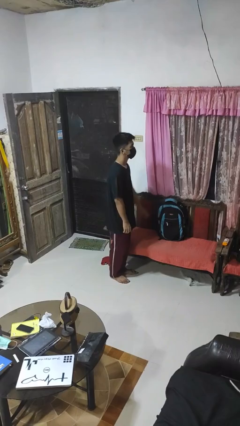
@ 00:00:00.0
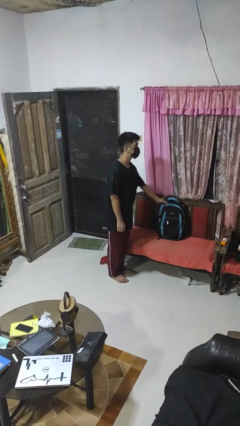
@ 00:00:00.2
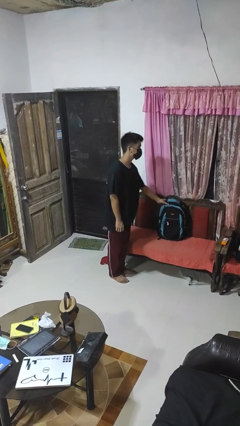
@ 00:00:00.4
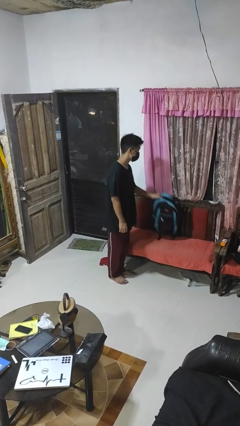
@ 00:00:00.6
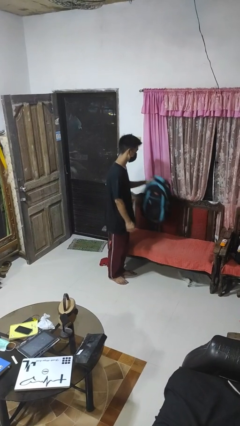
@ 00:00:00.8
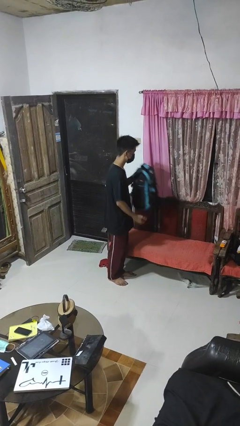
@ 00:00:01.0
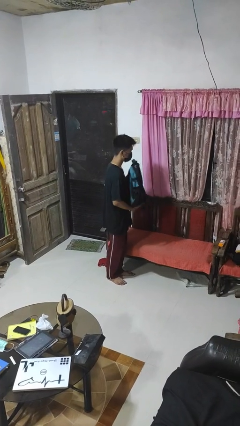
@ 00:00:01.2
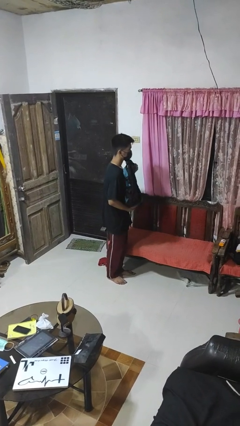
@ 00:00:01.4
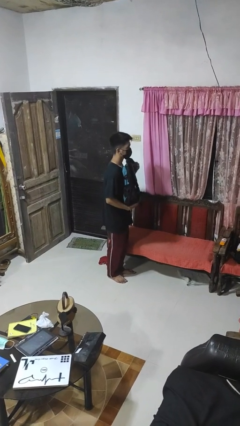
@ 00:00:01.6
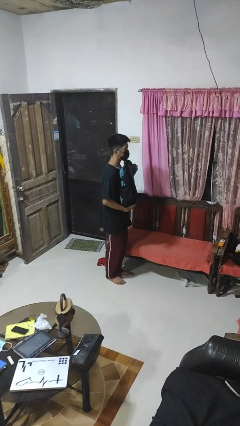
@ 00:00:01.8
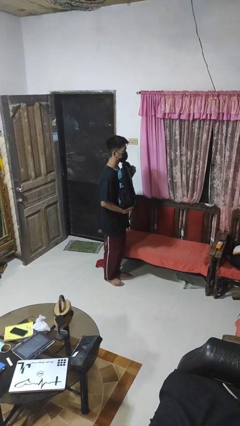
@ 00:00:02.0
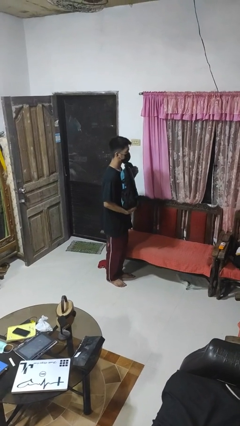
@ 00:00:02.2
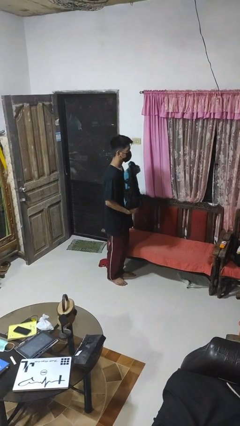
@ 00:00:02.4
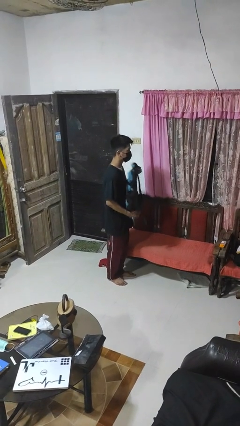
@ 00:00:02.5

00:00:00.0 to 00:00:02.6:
person picks up object from couch

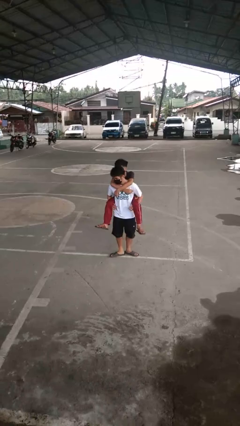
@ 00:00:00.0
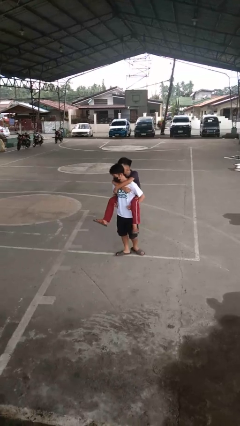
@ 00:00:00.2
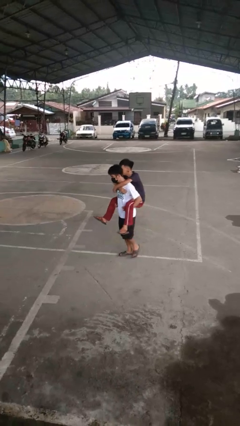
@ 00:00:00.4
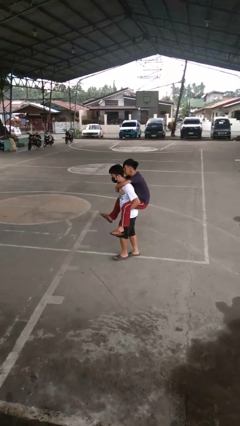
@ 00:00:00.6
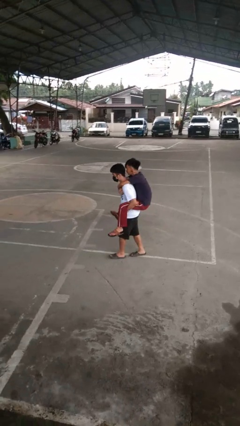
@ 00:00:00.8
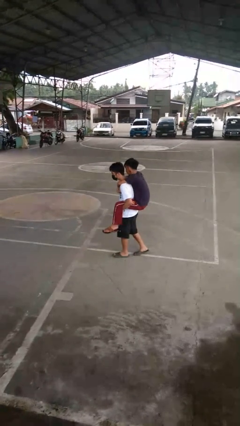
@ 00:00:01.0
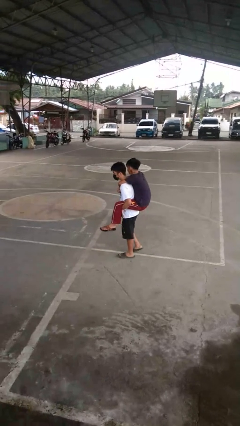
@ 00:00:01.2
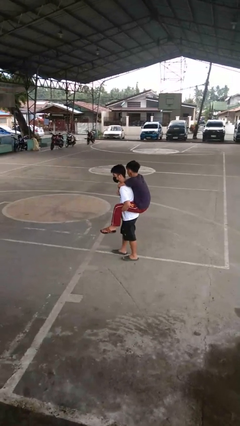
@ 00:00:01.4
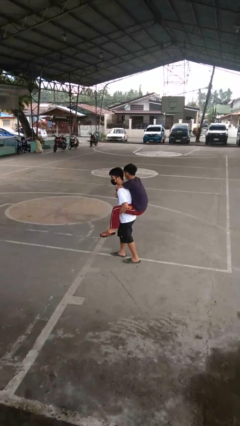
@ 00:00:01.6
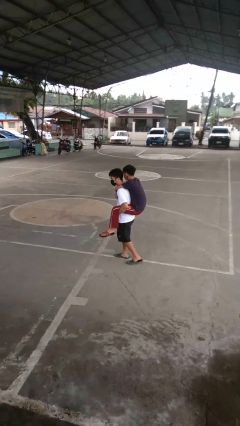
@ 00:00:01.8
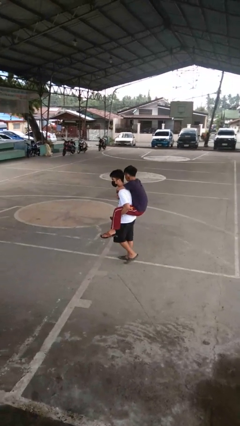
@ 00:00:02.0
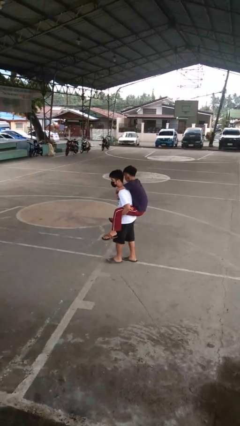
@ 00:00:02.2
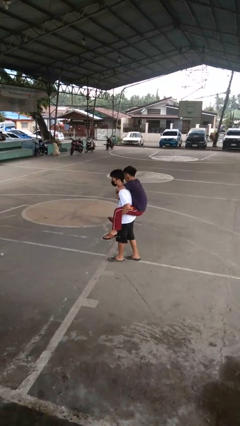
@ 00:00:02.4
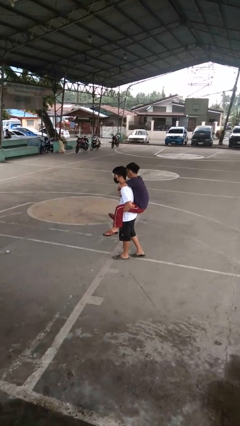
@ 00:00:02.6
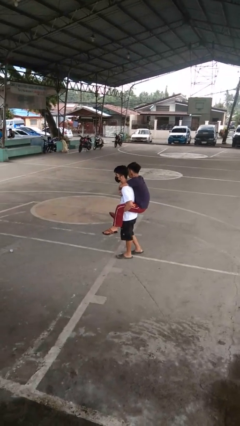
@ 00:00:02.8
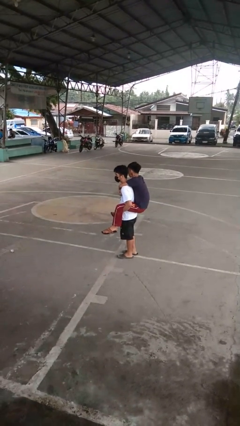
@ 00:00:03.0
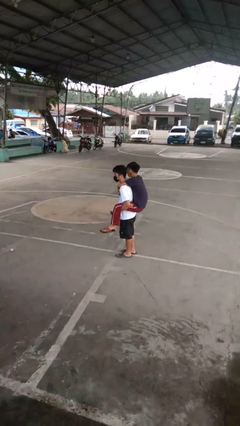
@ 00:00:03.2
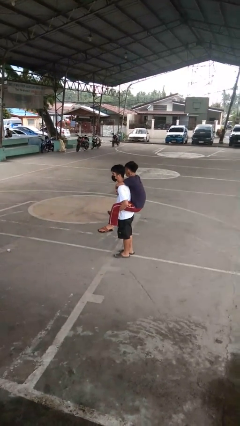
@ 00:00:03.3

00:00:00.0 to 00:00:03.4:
person carries person on back

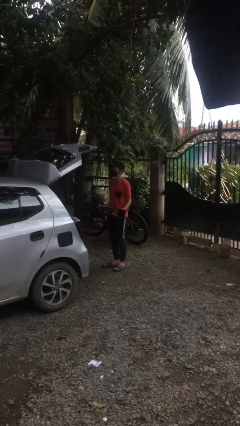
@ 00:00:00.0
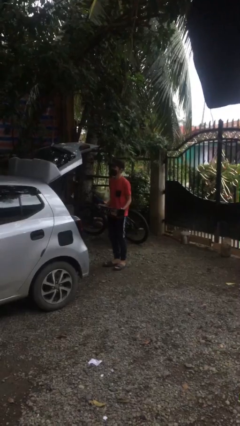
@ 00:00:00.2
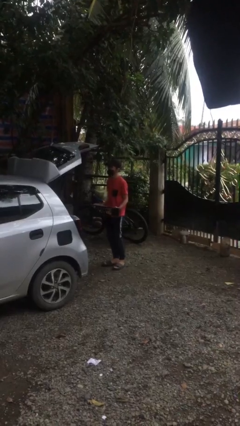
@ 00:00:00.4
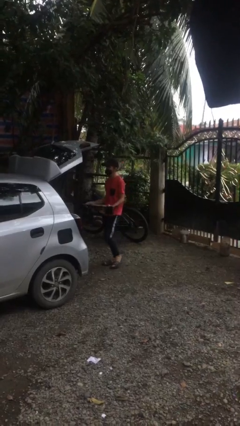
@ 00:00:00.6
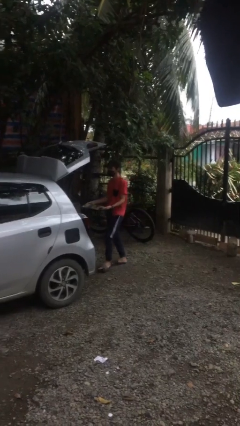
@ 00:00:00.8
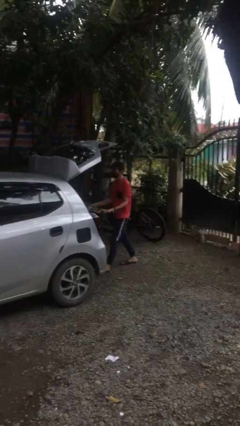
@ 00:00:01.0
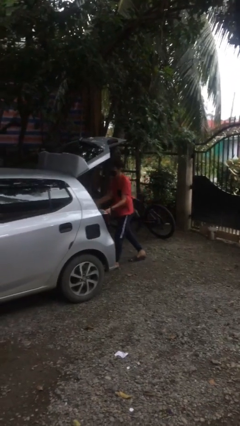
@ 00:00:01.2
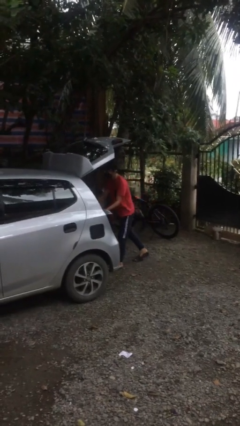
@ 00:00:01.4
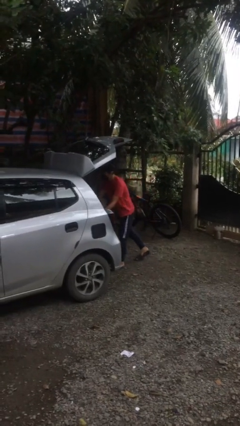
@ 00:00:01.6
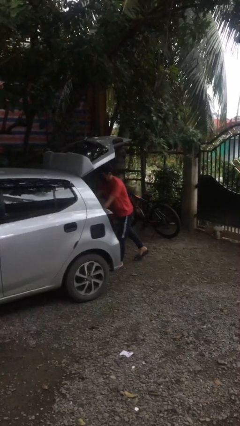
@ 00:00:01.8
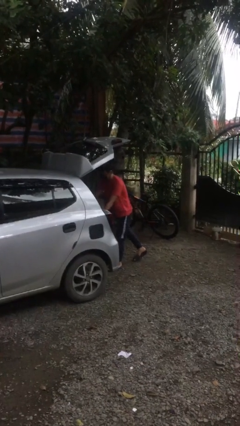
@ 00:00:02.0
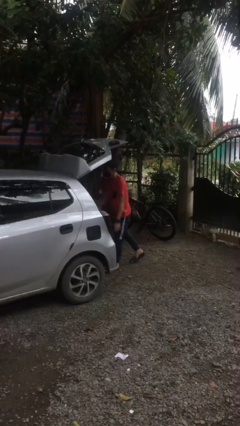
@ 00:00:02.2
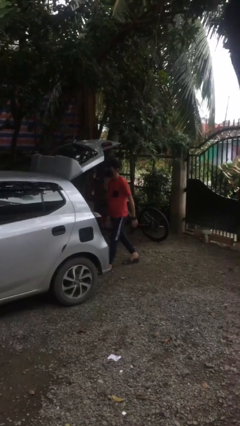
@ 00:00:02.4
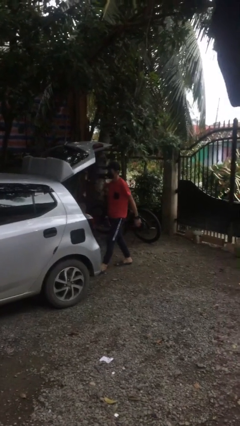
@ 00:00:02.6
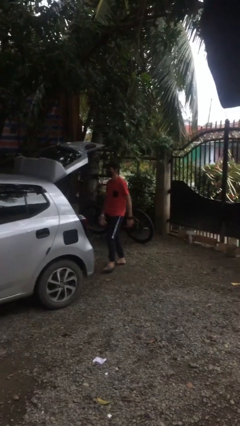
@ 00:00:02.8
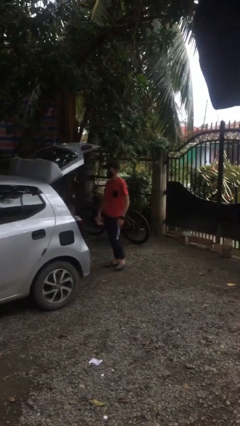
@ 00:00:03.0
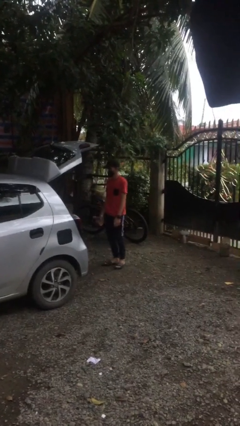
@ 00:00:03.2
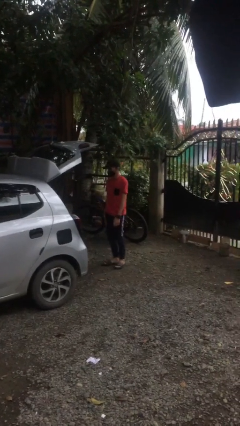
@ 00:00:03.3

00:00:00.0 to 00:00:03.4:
person loads car

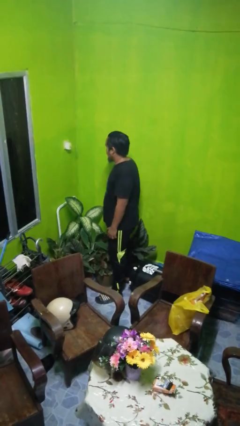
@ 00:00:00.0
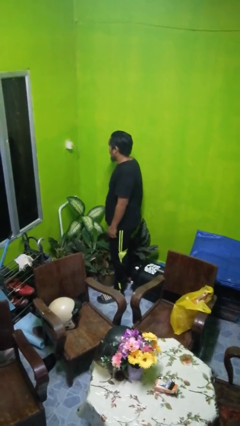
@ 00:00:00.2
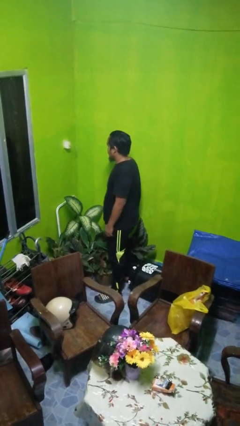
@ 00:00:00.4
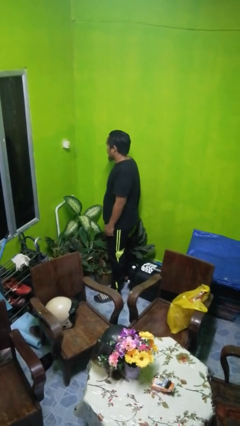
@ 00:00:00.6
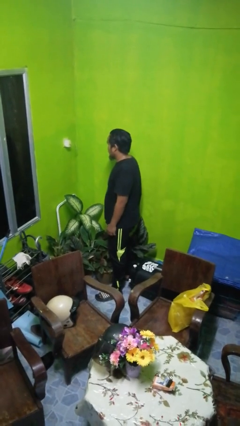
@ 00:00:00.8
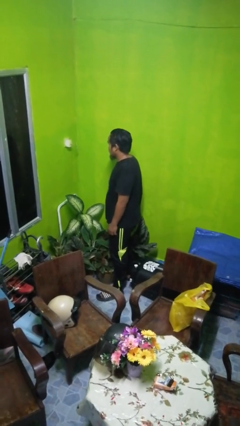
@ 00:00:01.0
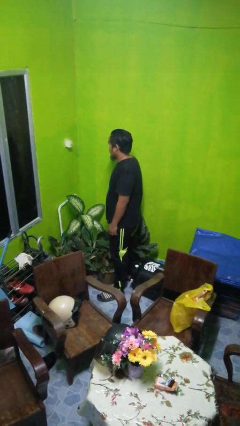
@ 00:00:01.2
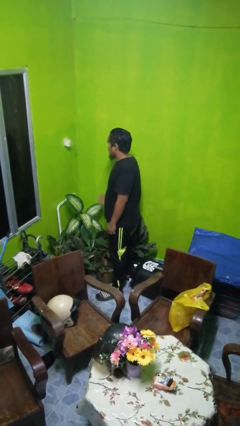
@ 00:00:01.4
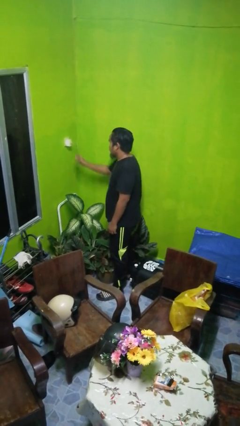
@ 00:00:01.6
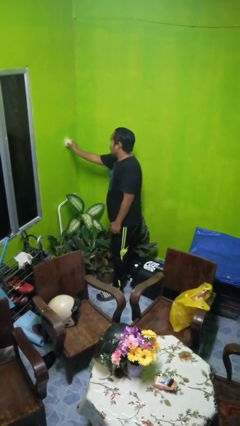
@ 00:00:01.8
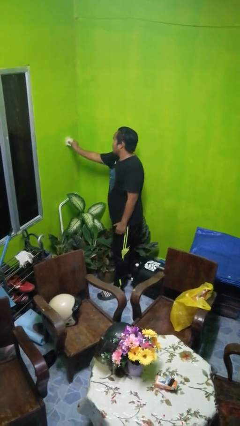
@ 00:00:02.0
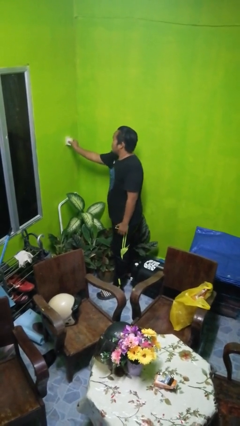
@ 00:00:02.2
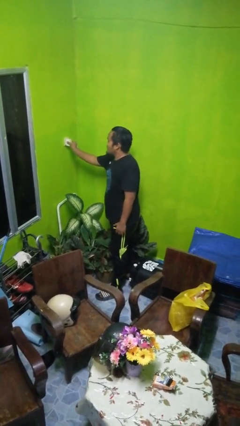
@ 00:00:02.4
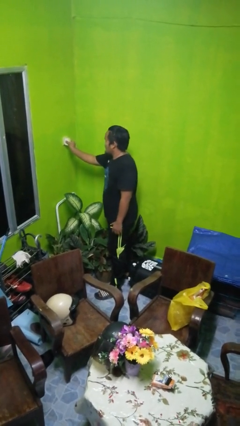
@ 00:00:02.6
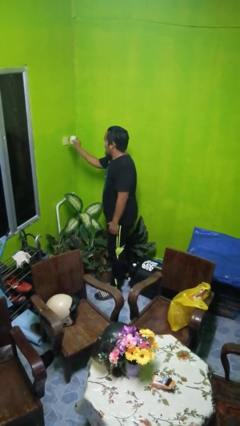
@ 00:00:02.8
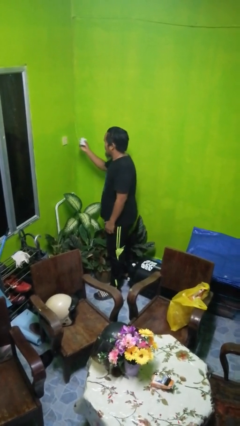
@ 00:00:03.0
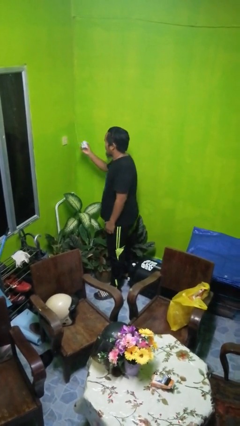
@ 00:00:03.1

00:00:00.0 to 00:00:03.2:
person unplugs from electrical socket

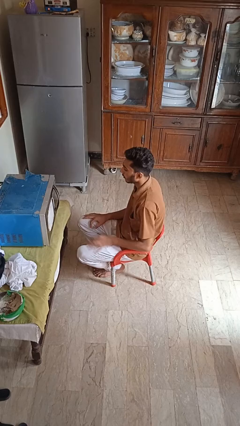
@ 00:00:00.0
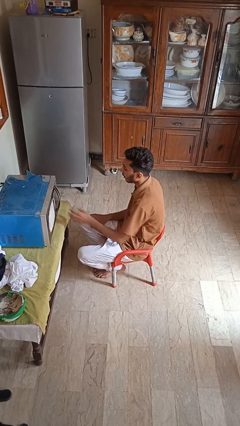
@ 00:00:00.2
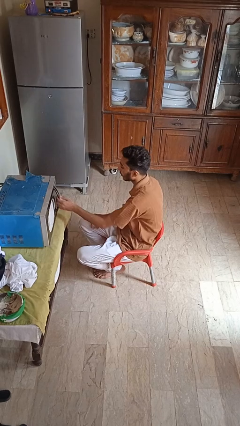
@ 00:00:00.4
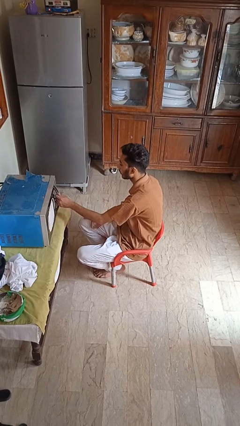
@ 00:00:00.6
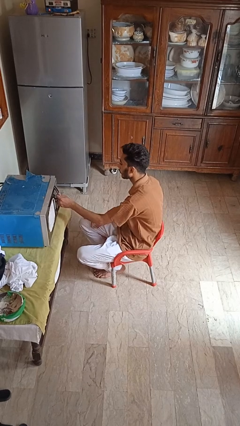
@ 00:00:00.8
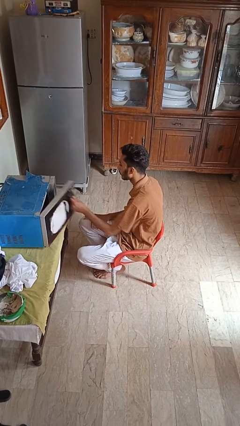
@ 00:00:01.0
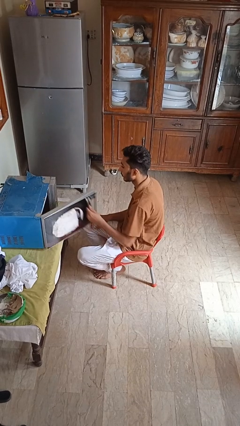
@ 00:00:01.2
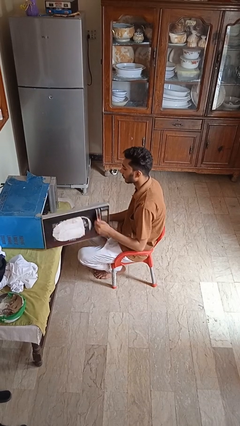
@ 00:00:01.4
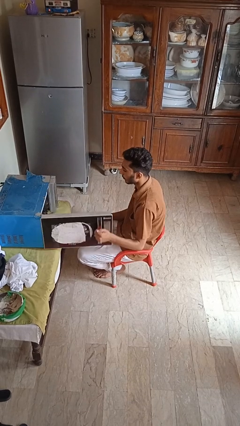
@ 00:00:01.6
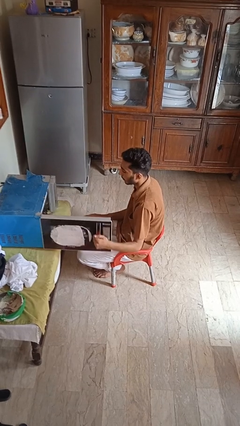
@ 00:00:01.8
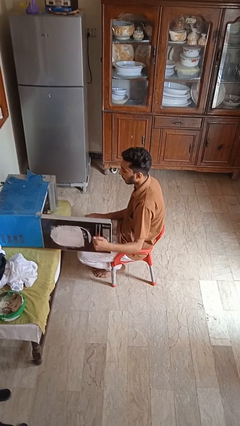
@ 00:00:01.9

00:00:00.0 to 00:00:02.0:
person opens microwave

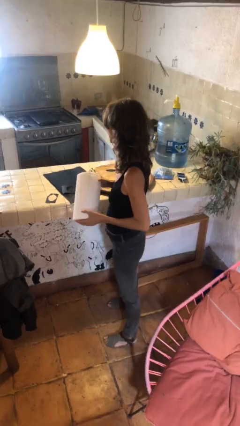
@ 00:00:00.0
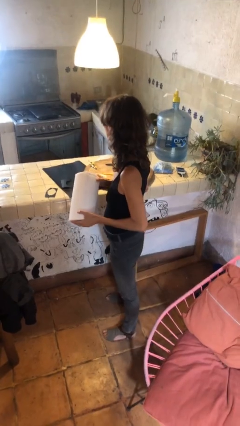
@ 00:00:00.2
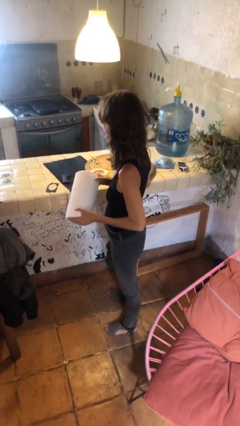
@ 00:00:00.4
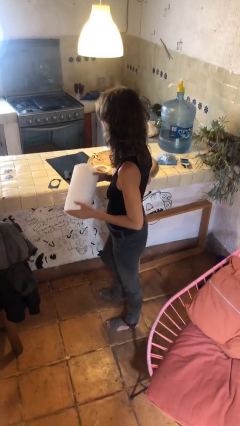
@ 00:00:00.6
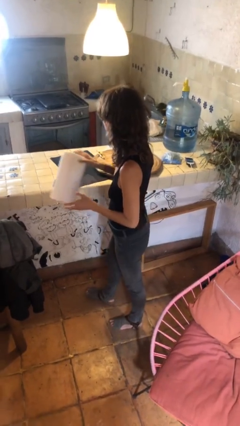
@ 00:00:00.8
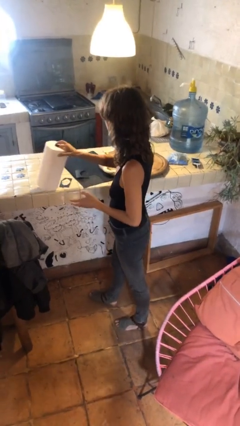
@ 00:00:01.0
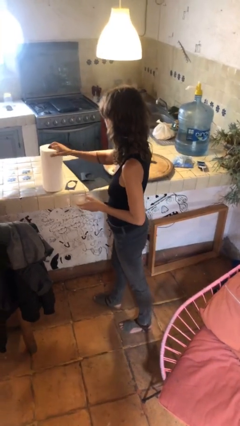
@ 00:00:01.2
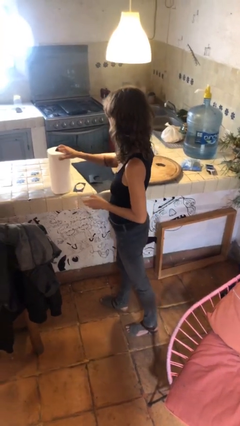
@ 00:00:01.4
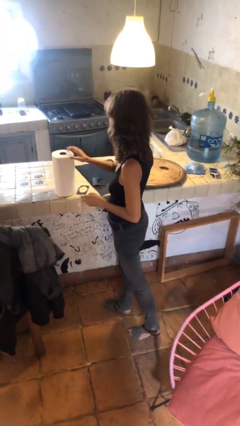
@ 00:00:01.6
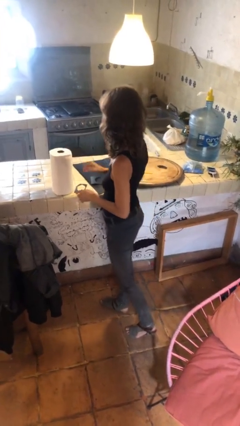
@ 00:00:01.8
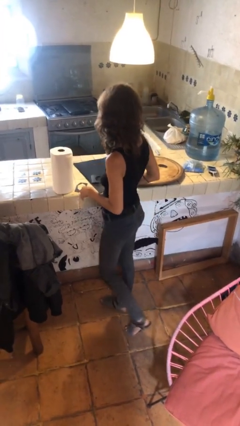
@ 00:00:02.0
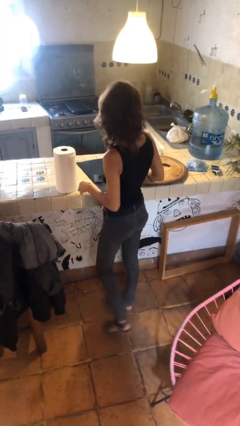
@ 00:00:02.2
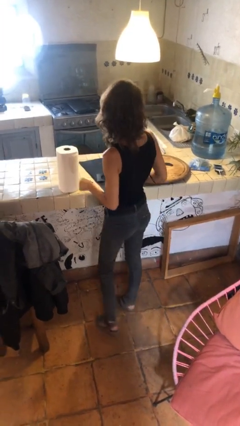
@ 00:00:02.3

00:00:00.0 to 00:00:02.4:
person puts down object on countertop

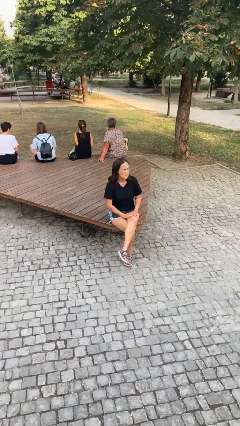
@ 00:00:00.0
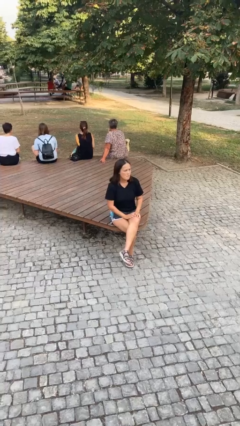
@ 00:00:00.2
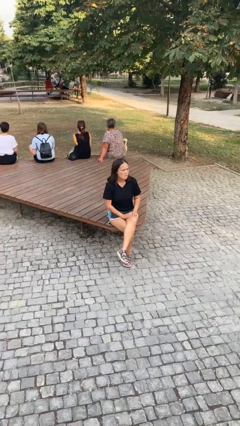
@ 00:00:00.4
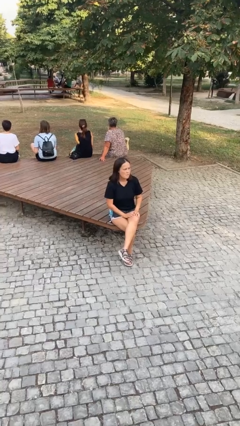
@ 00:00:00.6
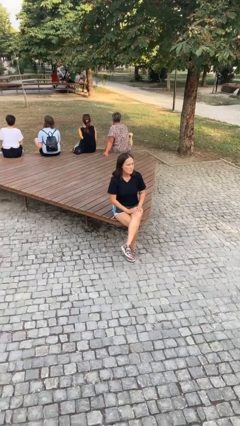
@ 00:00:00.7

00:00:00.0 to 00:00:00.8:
person points at person
